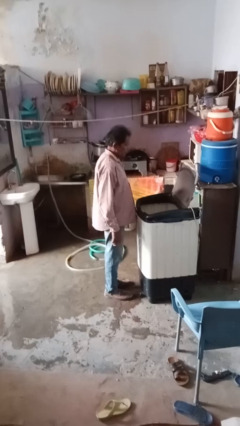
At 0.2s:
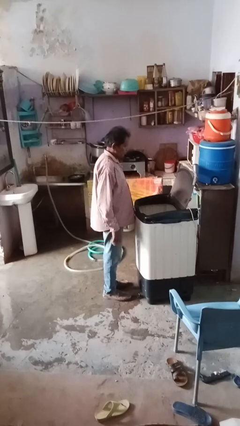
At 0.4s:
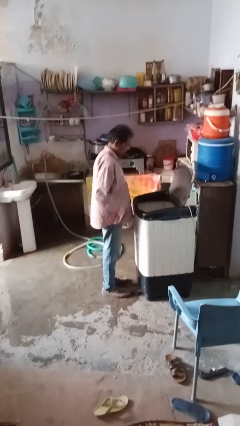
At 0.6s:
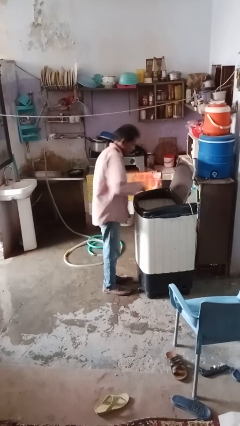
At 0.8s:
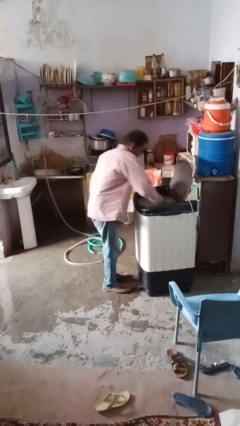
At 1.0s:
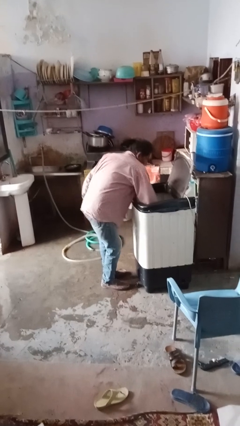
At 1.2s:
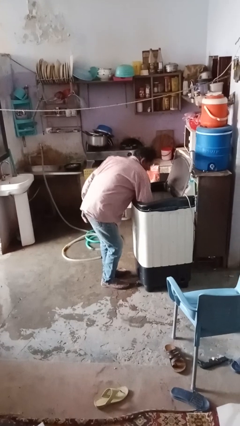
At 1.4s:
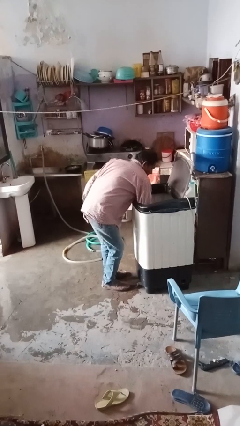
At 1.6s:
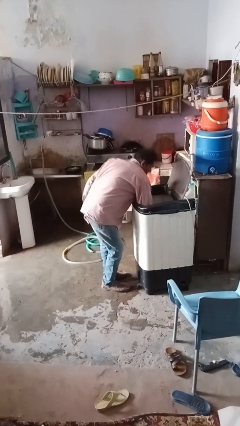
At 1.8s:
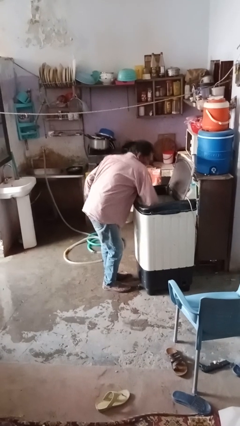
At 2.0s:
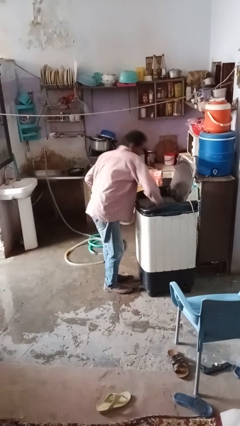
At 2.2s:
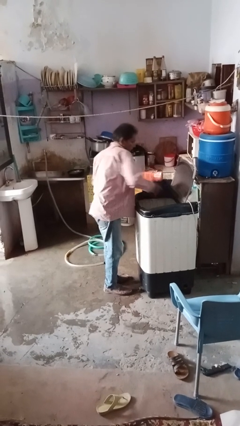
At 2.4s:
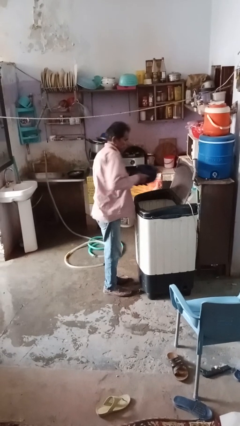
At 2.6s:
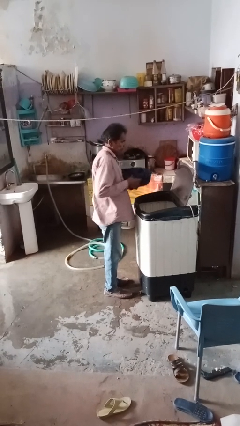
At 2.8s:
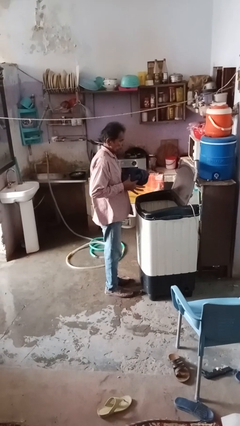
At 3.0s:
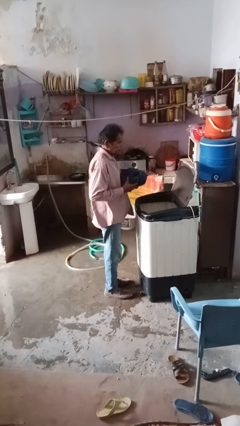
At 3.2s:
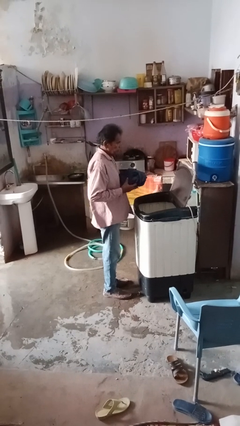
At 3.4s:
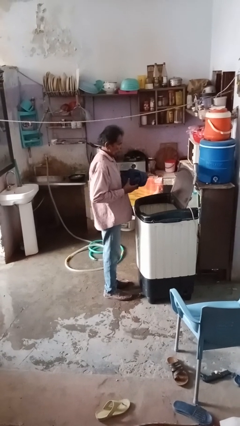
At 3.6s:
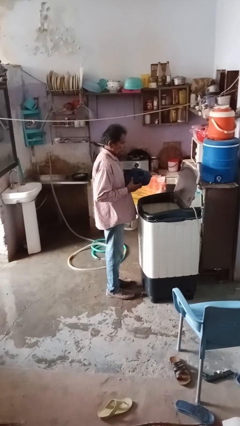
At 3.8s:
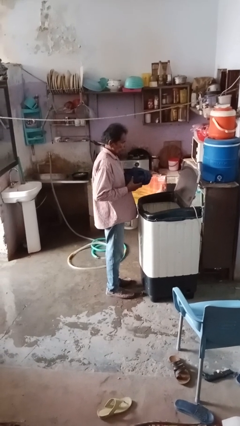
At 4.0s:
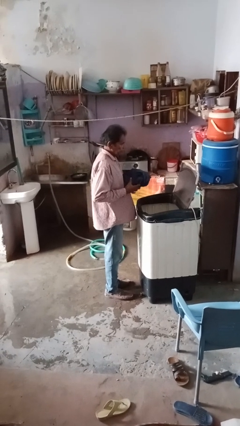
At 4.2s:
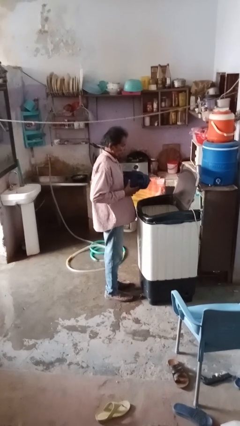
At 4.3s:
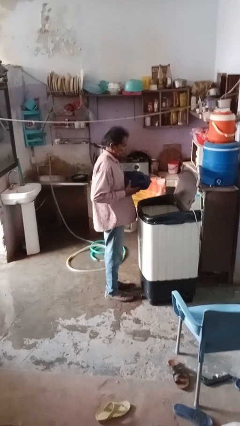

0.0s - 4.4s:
person unloads clotheswasher

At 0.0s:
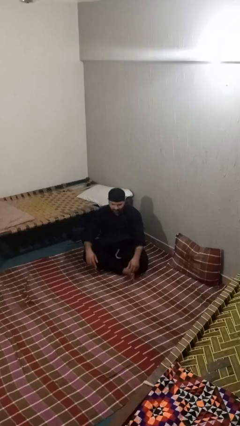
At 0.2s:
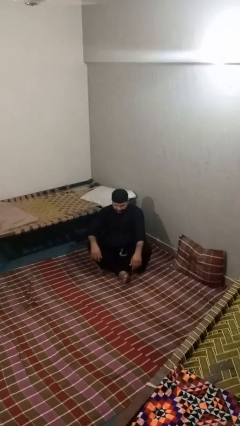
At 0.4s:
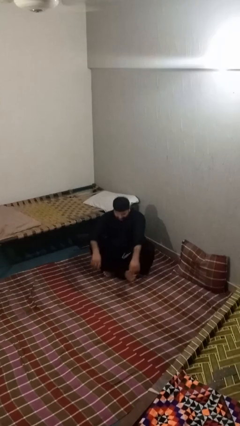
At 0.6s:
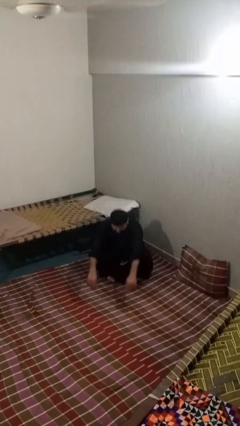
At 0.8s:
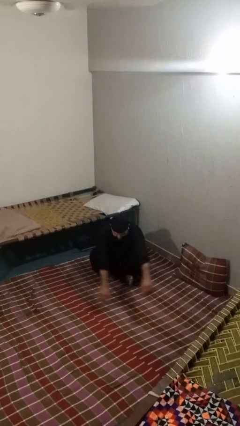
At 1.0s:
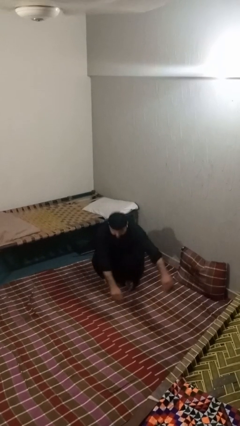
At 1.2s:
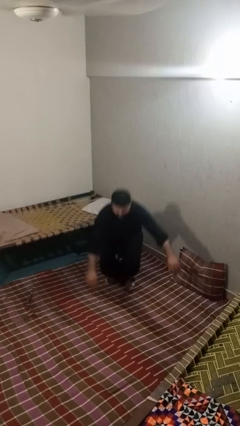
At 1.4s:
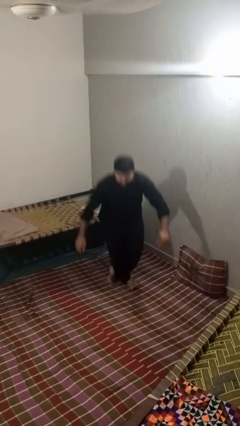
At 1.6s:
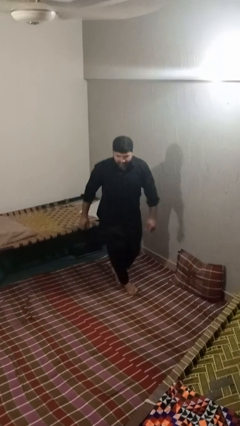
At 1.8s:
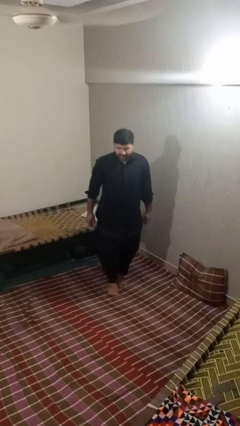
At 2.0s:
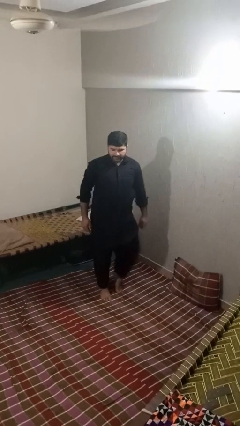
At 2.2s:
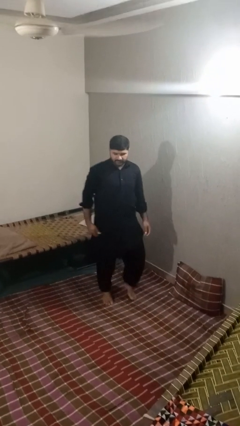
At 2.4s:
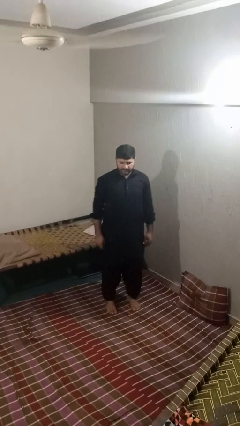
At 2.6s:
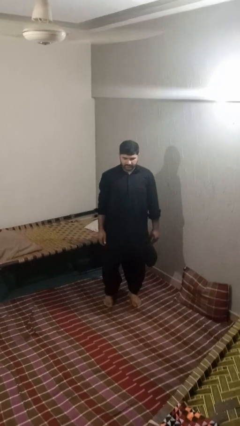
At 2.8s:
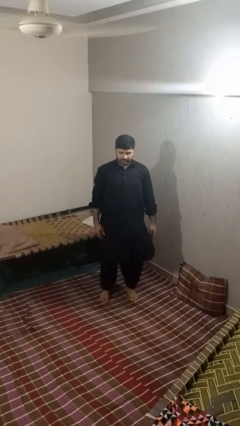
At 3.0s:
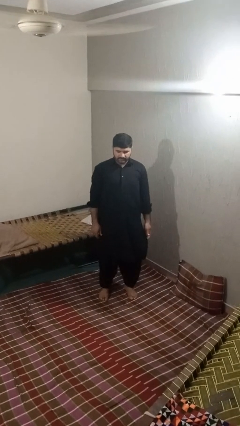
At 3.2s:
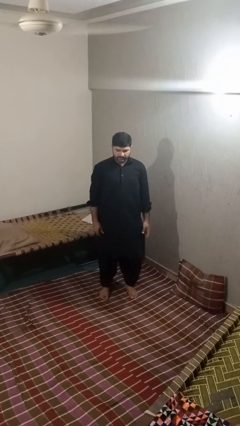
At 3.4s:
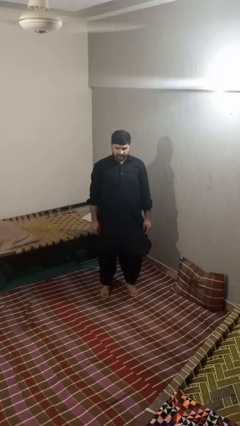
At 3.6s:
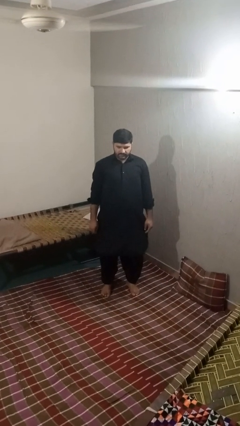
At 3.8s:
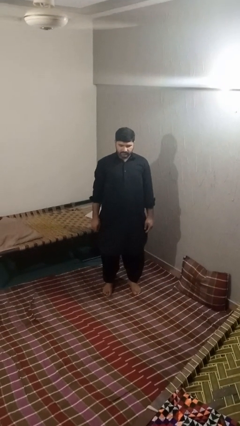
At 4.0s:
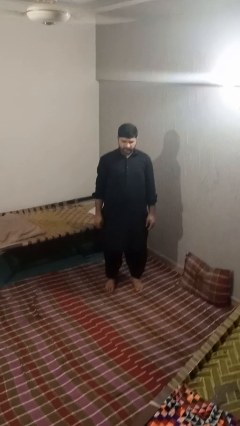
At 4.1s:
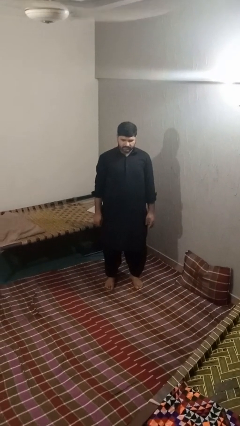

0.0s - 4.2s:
person stands up from floor

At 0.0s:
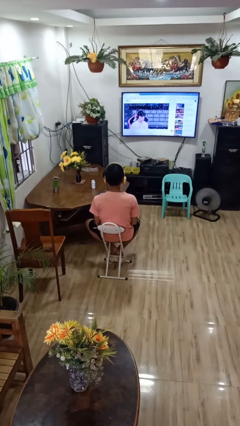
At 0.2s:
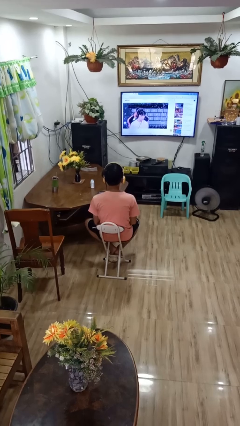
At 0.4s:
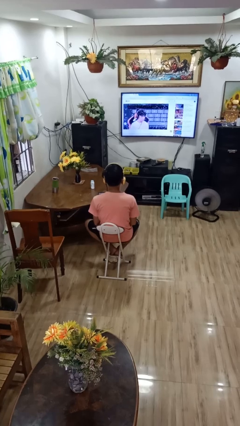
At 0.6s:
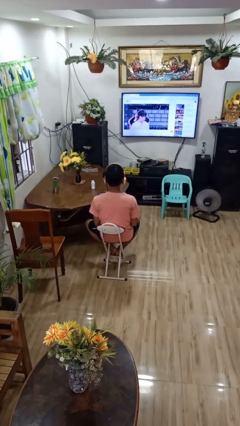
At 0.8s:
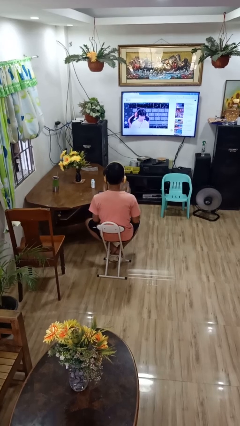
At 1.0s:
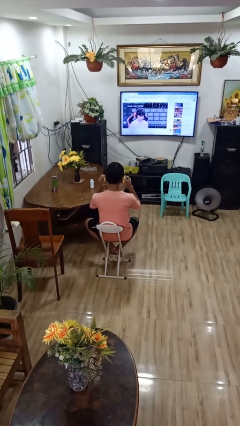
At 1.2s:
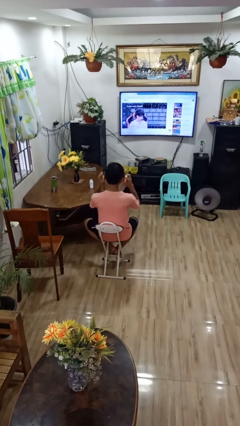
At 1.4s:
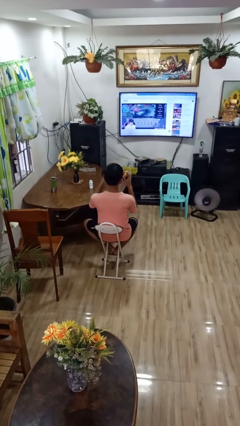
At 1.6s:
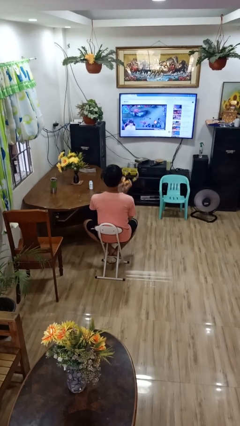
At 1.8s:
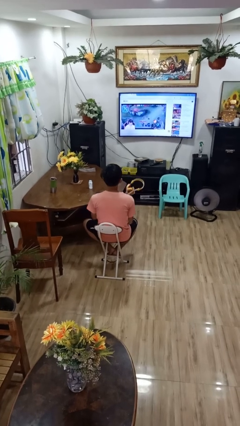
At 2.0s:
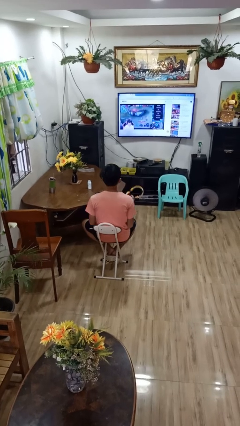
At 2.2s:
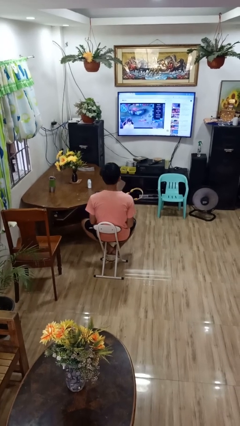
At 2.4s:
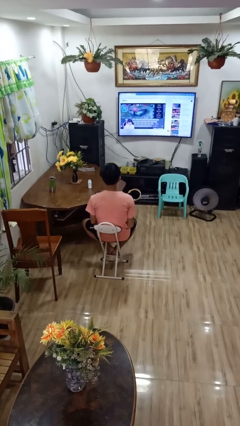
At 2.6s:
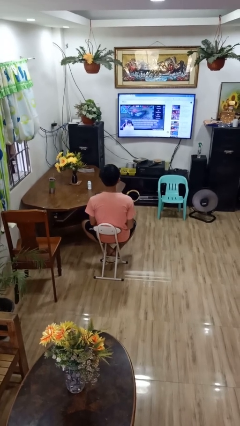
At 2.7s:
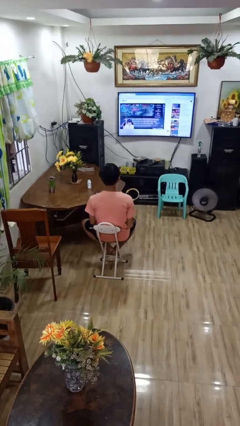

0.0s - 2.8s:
person takes off headphones

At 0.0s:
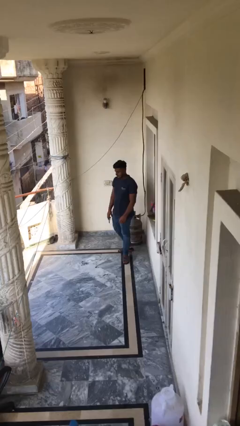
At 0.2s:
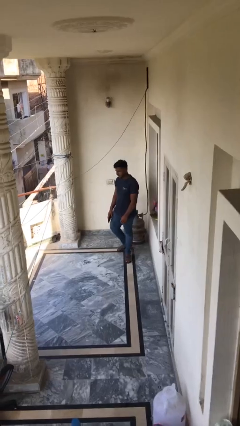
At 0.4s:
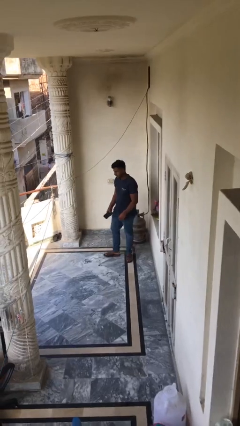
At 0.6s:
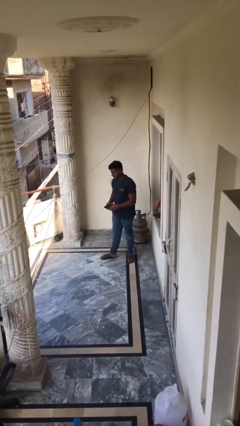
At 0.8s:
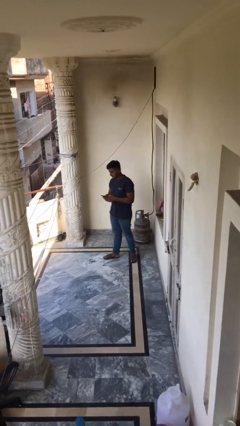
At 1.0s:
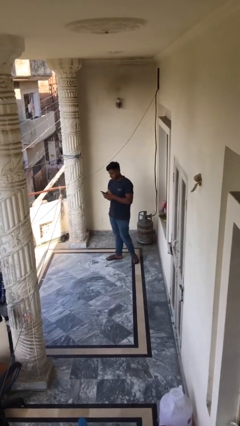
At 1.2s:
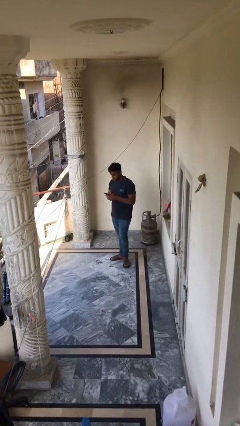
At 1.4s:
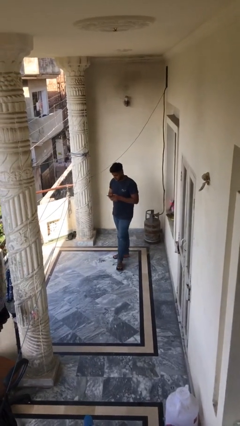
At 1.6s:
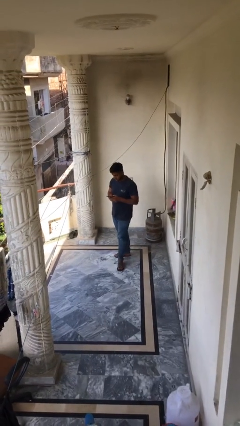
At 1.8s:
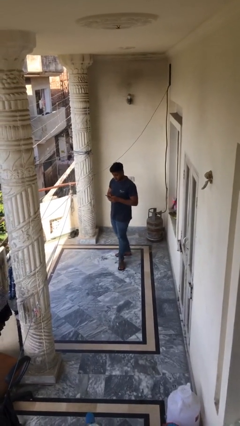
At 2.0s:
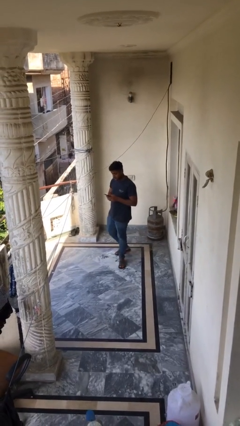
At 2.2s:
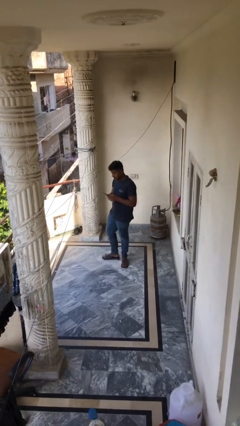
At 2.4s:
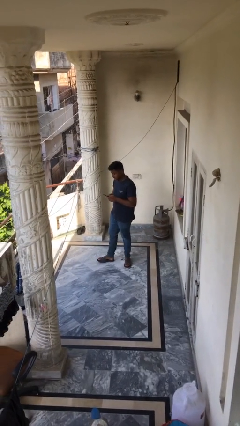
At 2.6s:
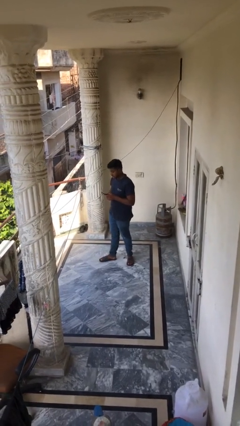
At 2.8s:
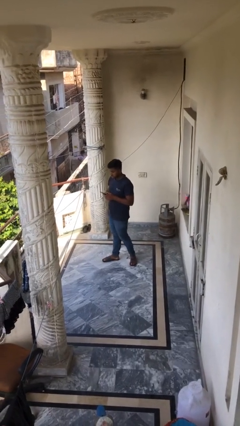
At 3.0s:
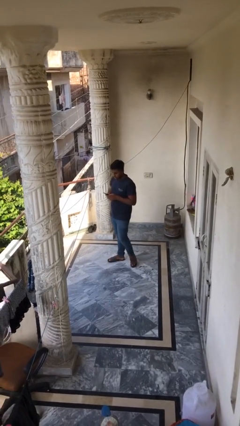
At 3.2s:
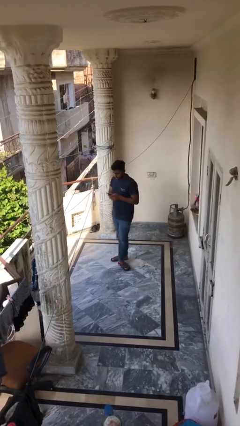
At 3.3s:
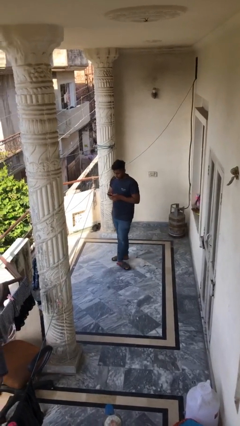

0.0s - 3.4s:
person texts on phone

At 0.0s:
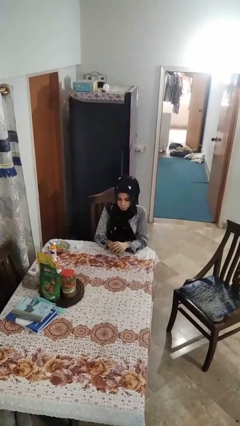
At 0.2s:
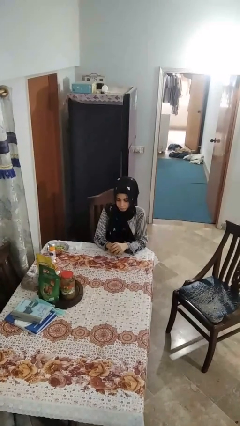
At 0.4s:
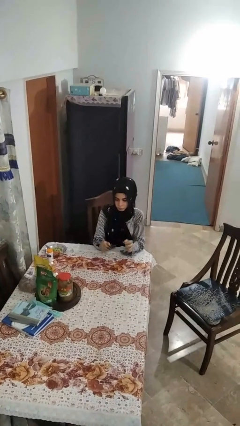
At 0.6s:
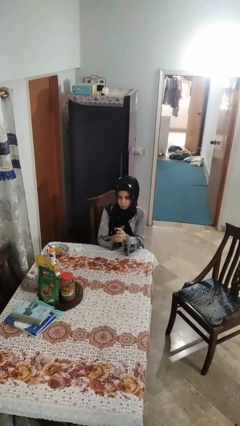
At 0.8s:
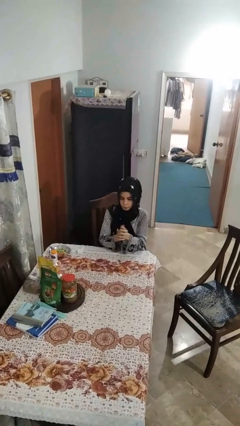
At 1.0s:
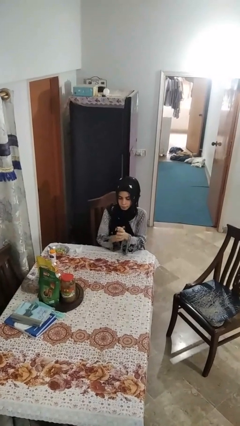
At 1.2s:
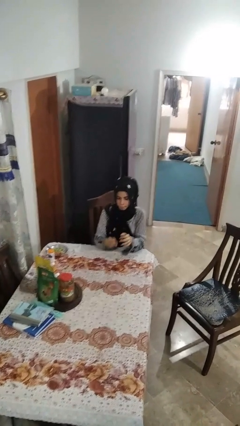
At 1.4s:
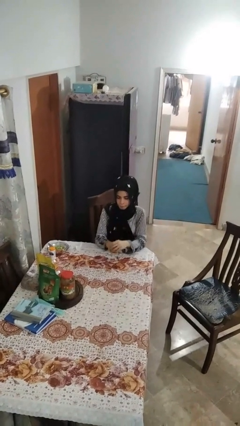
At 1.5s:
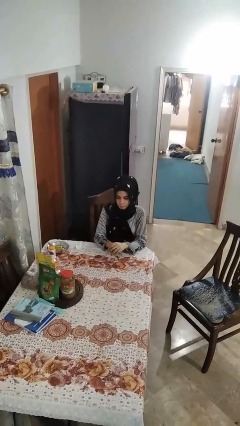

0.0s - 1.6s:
person claps hands

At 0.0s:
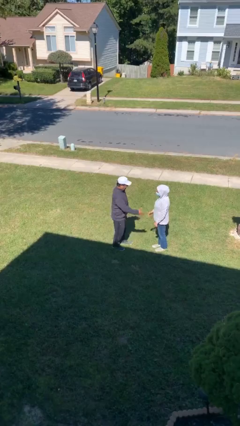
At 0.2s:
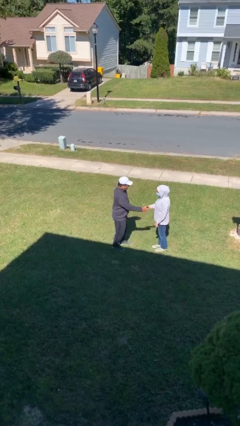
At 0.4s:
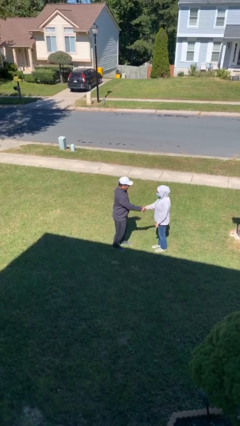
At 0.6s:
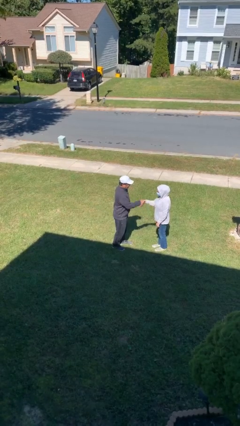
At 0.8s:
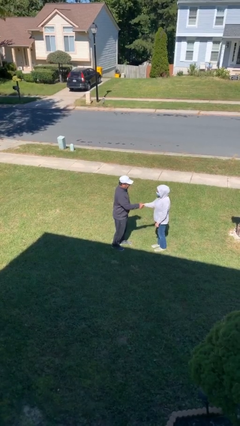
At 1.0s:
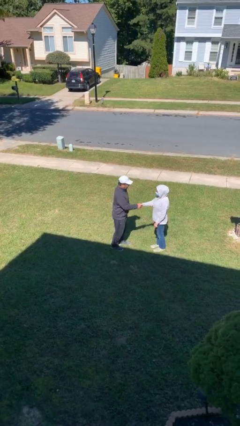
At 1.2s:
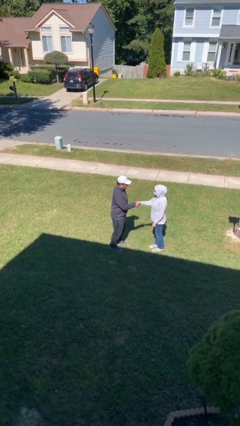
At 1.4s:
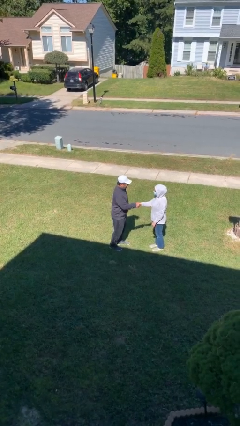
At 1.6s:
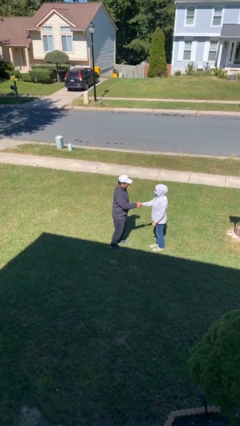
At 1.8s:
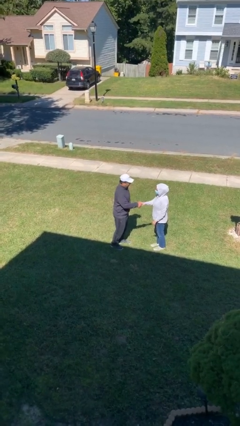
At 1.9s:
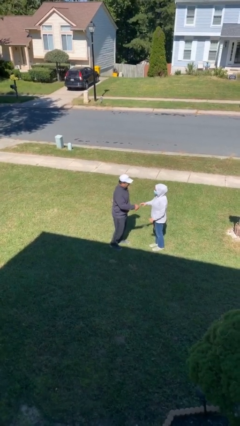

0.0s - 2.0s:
person shakes hand
